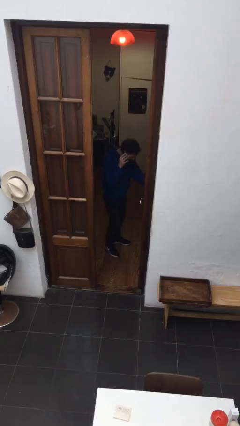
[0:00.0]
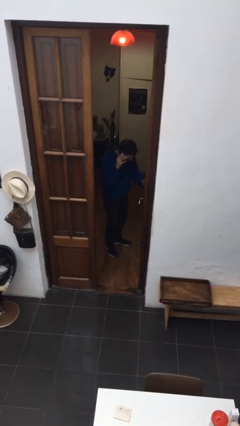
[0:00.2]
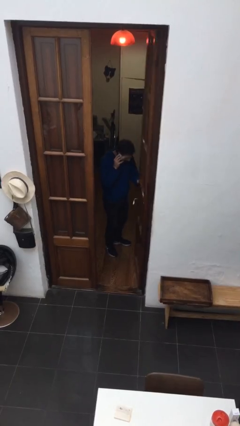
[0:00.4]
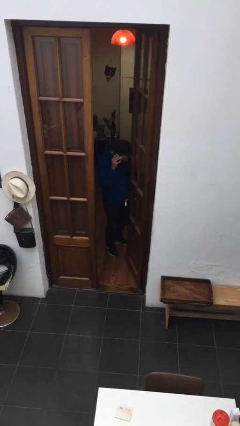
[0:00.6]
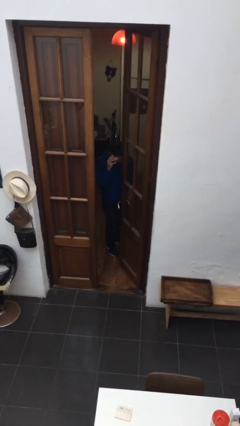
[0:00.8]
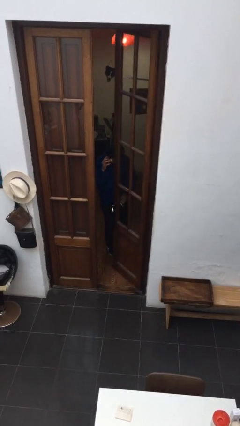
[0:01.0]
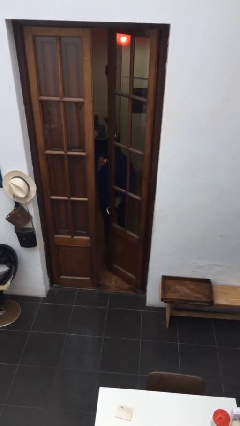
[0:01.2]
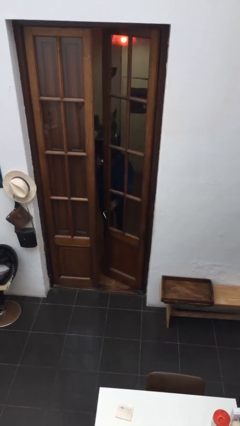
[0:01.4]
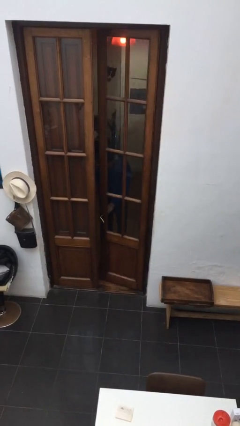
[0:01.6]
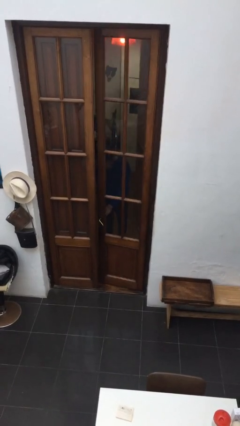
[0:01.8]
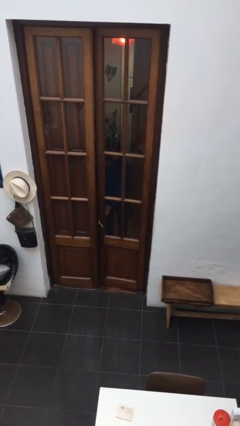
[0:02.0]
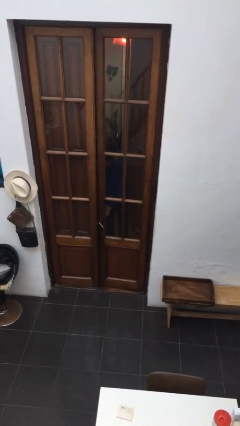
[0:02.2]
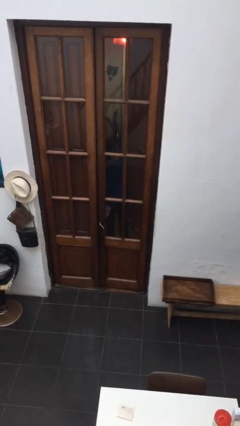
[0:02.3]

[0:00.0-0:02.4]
person closes facility door

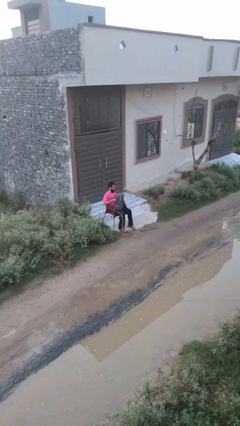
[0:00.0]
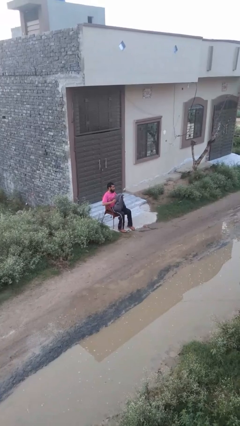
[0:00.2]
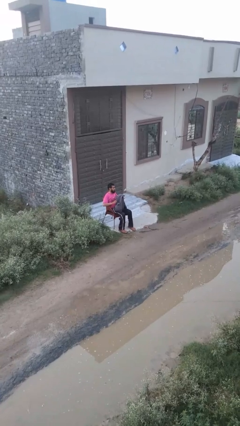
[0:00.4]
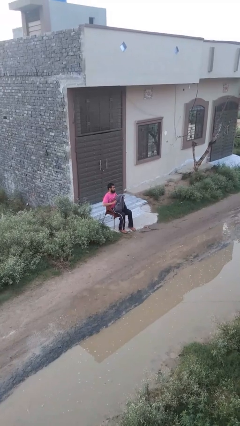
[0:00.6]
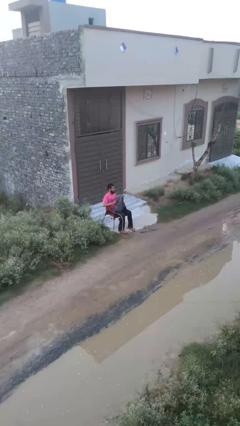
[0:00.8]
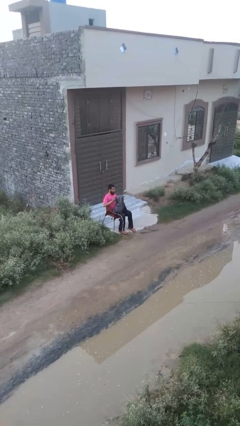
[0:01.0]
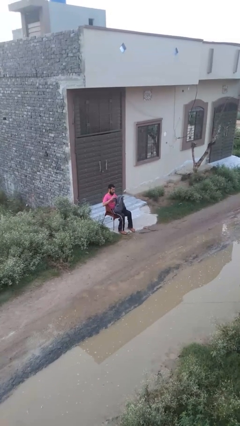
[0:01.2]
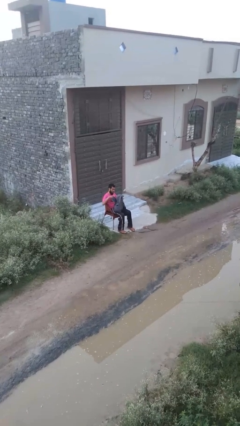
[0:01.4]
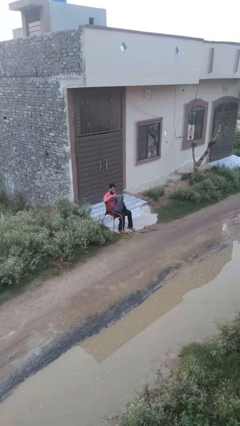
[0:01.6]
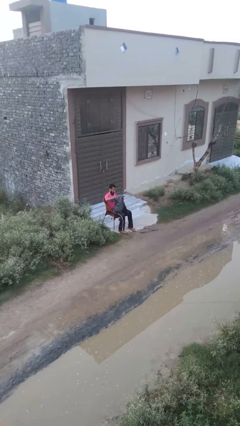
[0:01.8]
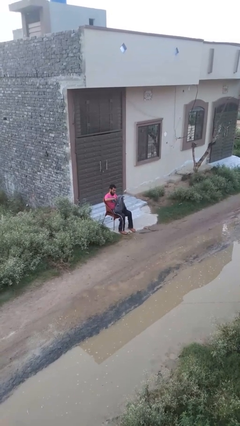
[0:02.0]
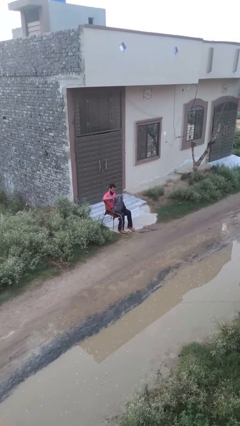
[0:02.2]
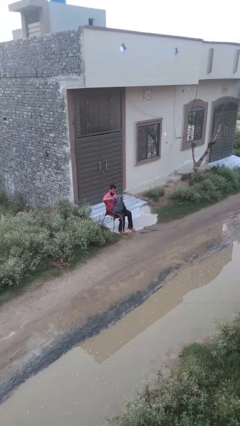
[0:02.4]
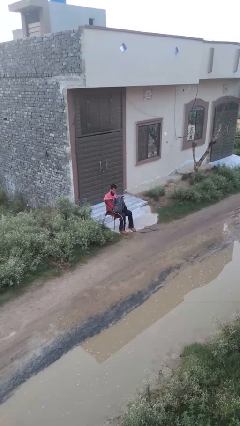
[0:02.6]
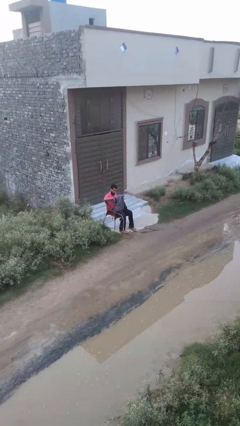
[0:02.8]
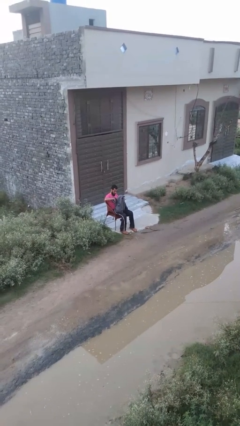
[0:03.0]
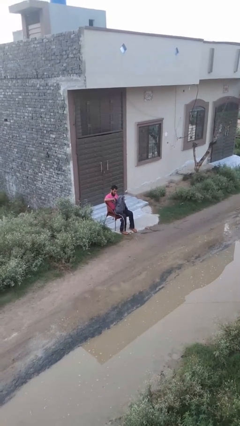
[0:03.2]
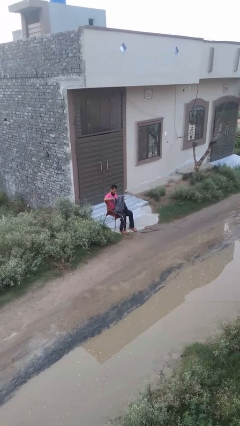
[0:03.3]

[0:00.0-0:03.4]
person searches in backpack

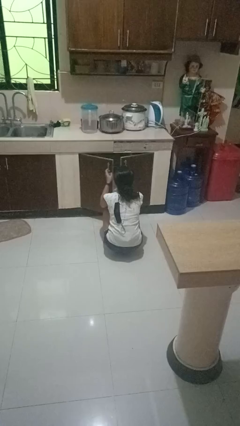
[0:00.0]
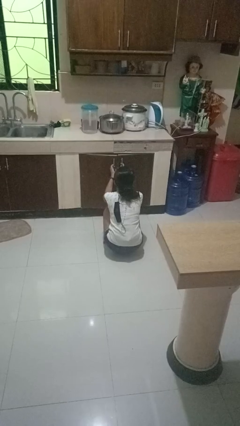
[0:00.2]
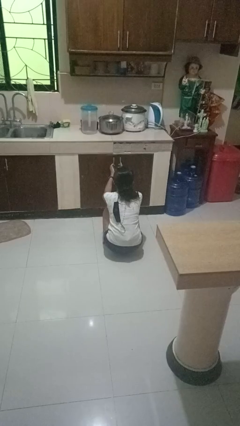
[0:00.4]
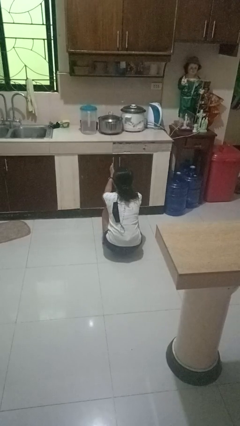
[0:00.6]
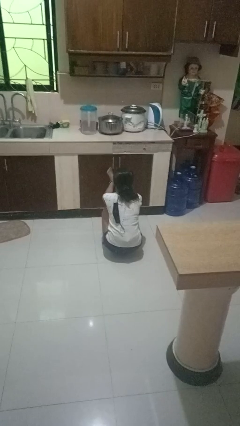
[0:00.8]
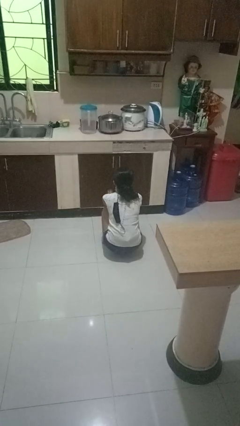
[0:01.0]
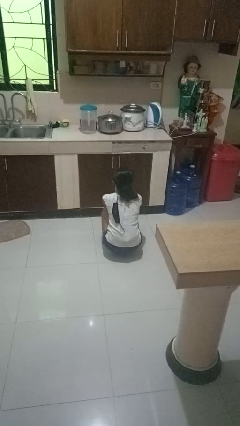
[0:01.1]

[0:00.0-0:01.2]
person closes dishwasher

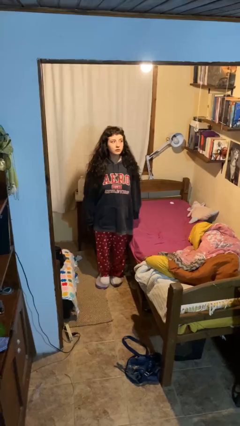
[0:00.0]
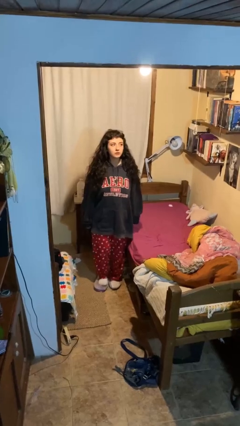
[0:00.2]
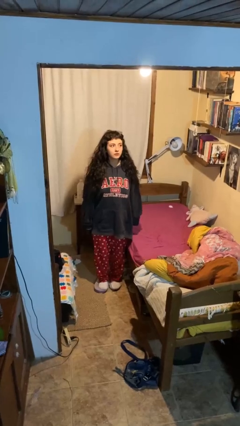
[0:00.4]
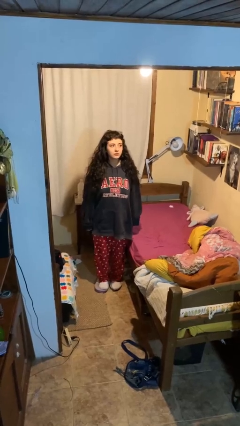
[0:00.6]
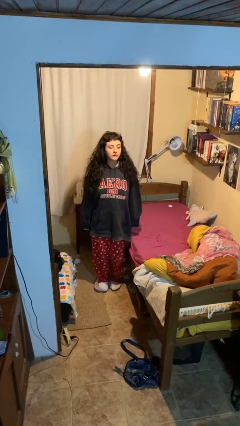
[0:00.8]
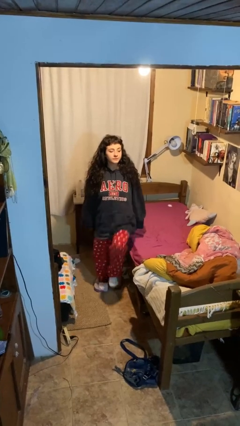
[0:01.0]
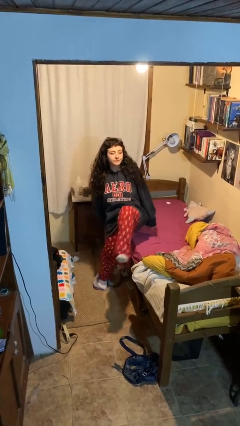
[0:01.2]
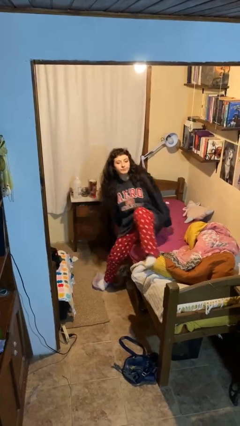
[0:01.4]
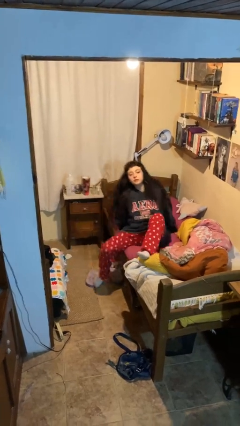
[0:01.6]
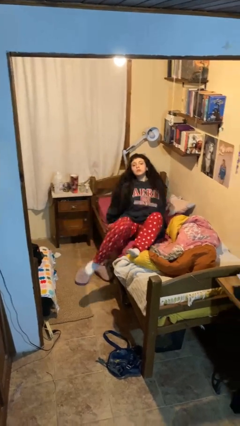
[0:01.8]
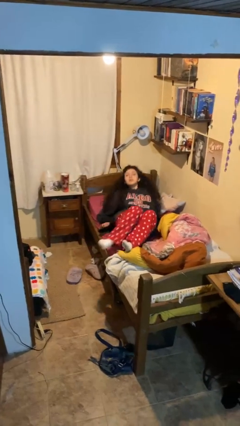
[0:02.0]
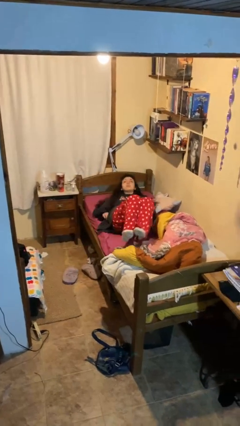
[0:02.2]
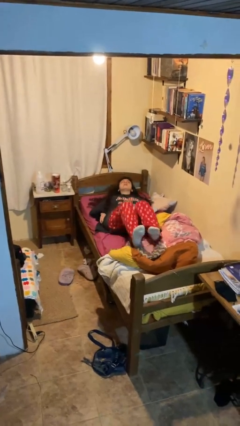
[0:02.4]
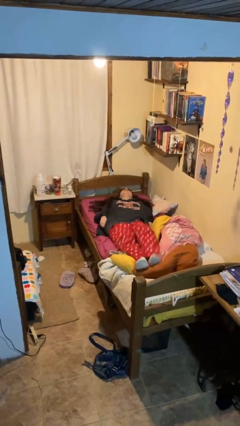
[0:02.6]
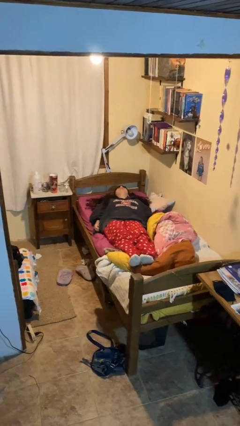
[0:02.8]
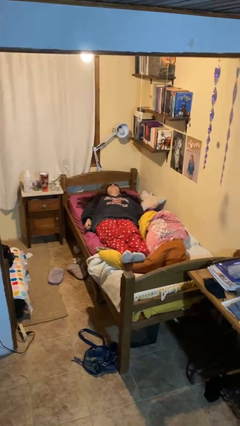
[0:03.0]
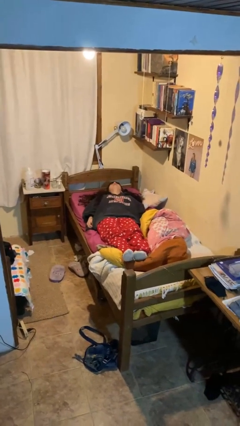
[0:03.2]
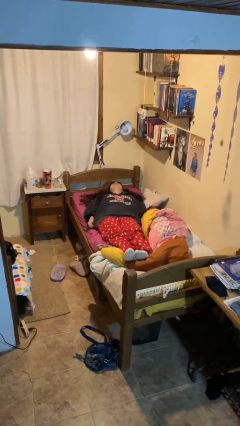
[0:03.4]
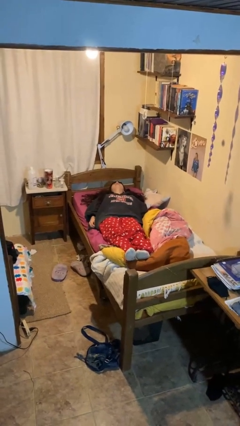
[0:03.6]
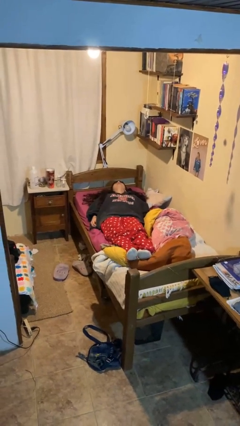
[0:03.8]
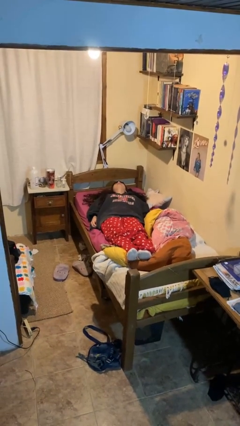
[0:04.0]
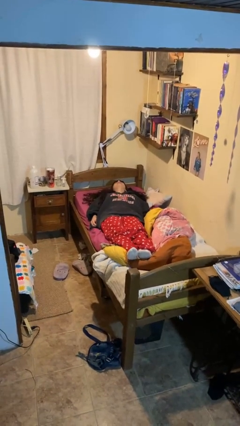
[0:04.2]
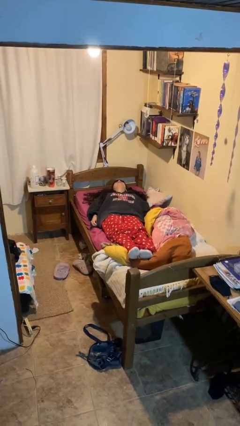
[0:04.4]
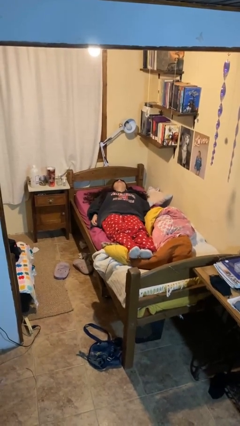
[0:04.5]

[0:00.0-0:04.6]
person lies down on bed

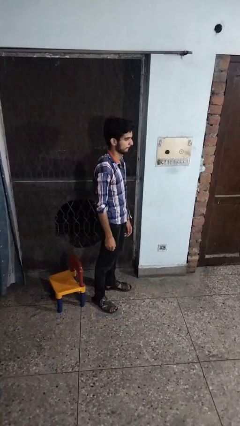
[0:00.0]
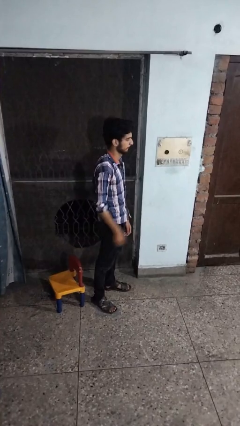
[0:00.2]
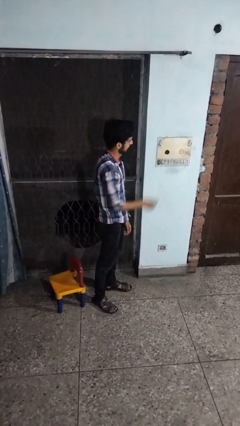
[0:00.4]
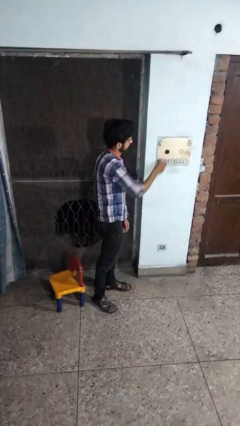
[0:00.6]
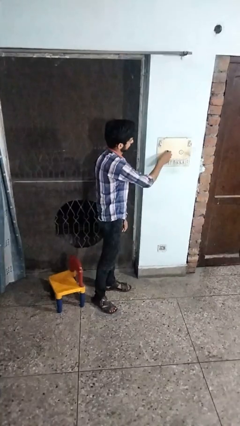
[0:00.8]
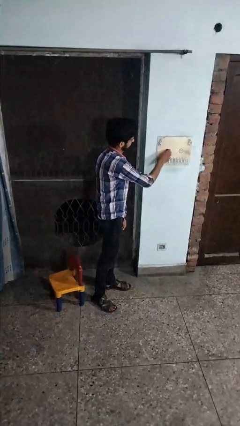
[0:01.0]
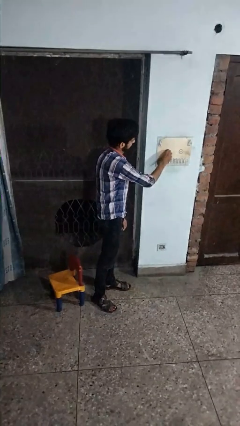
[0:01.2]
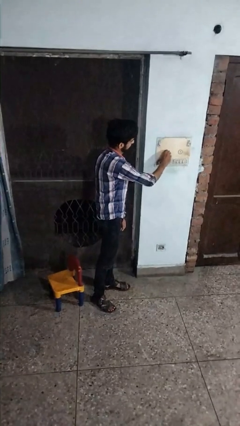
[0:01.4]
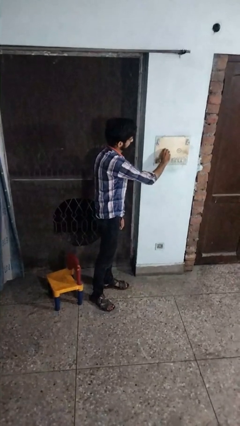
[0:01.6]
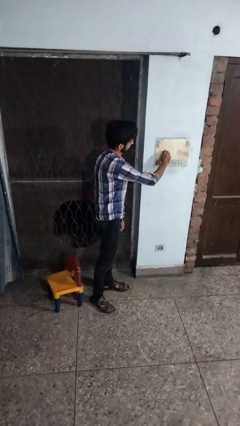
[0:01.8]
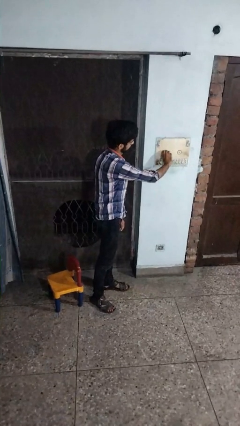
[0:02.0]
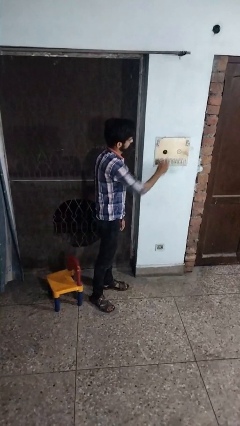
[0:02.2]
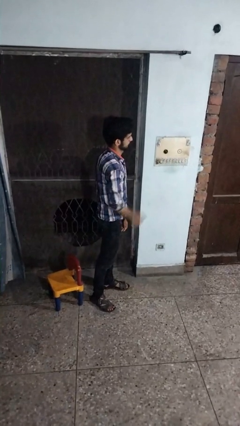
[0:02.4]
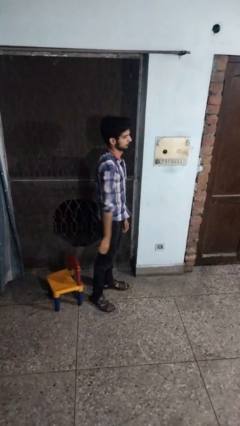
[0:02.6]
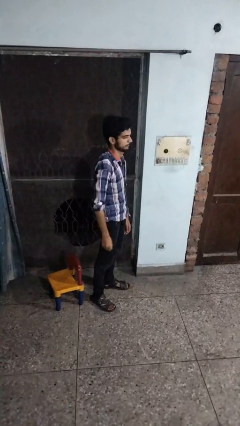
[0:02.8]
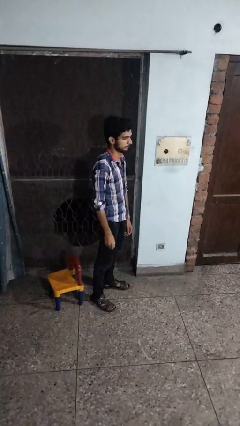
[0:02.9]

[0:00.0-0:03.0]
person adjusts thermostat

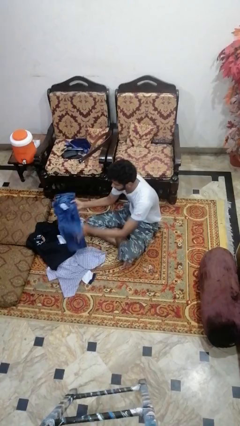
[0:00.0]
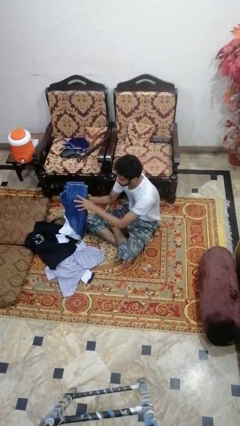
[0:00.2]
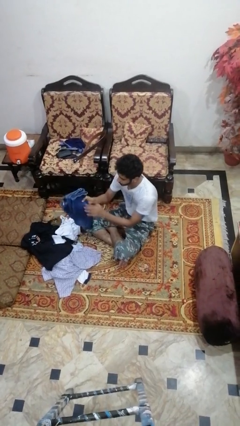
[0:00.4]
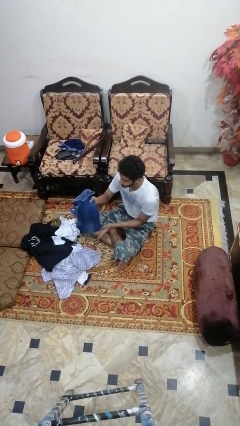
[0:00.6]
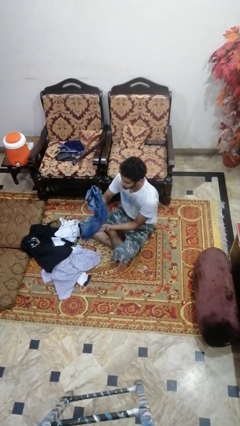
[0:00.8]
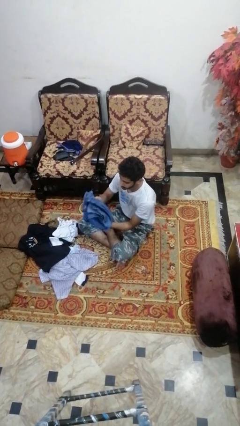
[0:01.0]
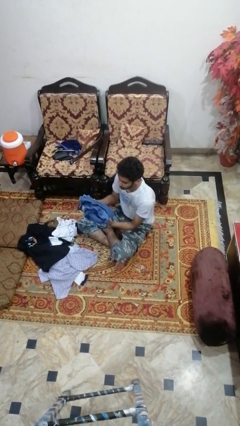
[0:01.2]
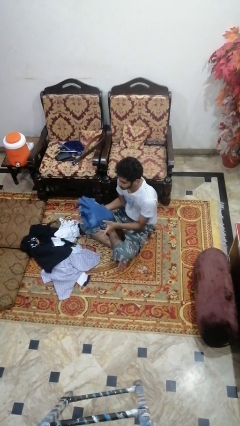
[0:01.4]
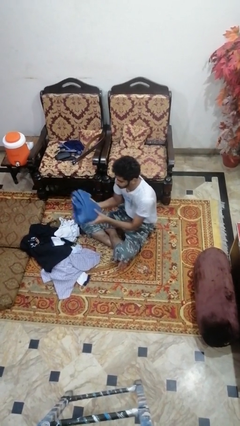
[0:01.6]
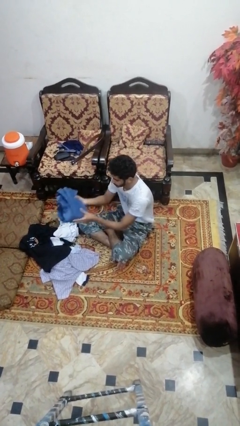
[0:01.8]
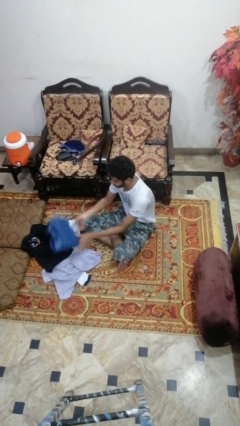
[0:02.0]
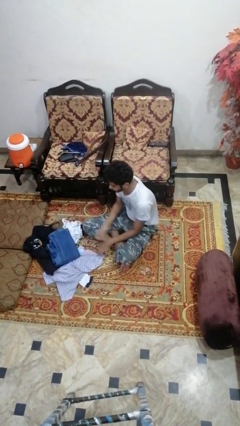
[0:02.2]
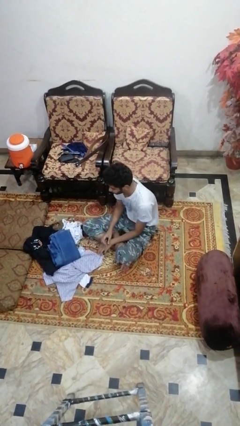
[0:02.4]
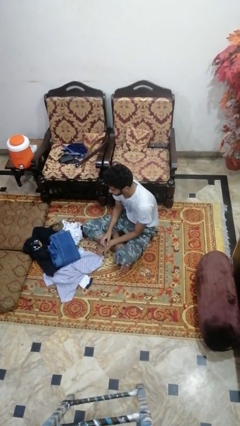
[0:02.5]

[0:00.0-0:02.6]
person folds pants

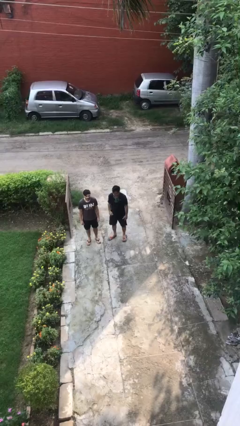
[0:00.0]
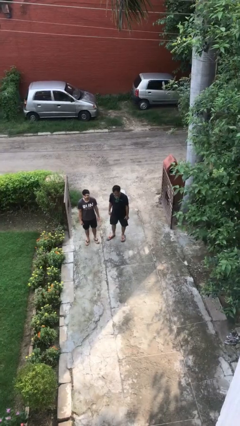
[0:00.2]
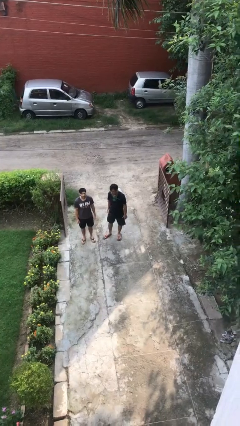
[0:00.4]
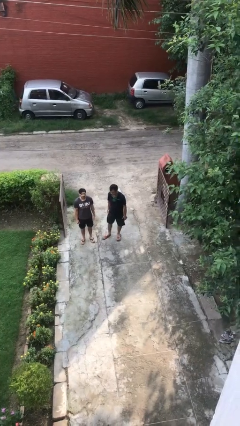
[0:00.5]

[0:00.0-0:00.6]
person nudges person with elbow
